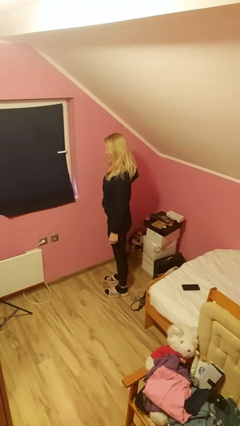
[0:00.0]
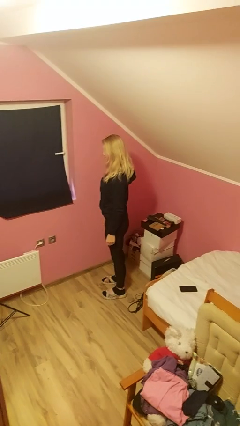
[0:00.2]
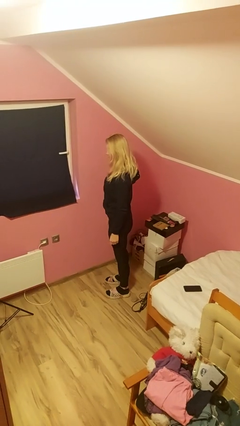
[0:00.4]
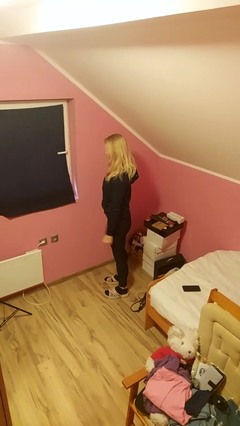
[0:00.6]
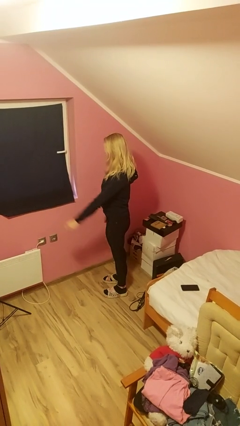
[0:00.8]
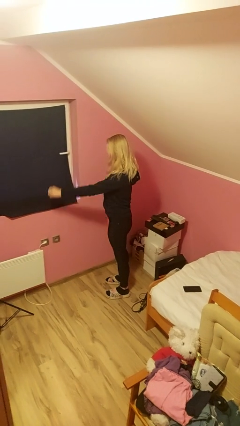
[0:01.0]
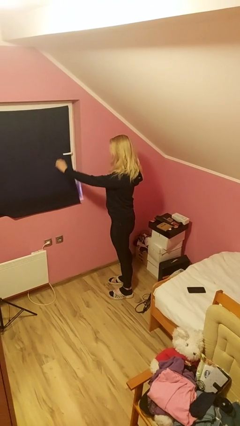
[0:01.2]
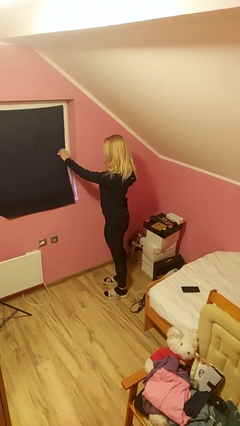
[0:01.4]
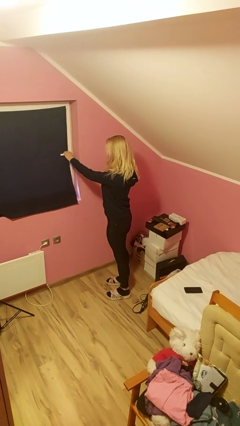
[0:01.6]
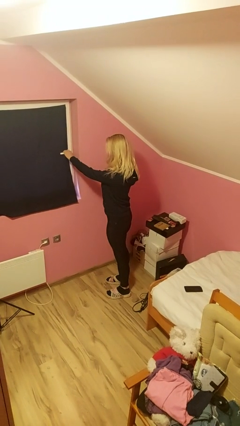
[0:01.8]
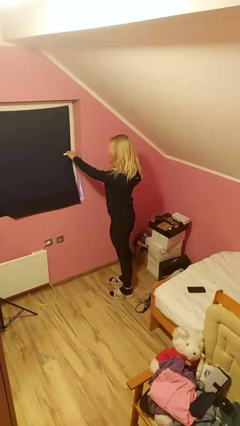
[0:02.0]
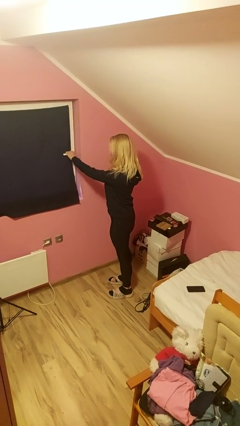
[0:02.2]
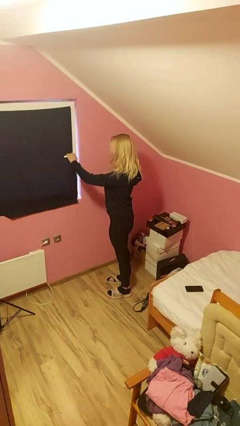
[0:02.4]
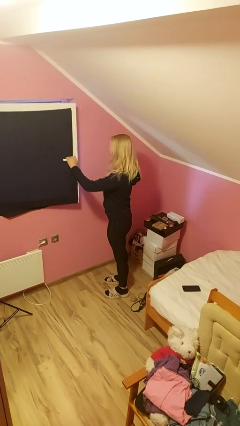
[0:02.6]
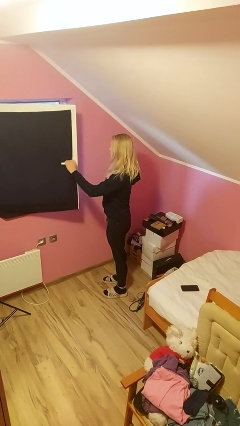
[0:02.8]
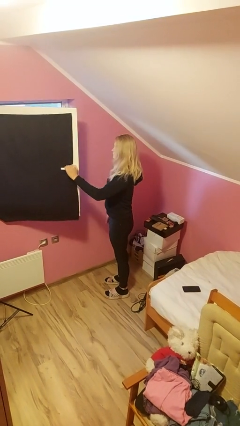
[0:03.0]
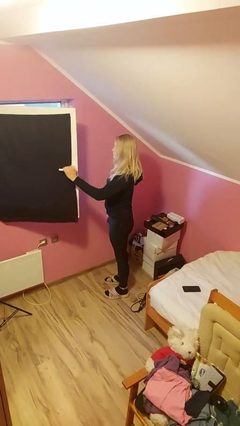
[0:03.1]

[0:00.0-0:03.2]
person opens home window

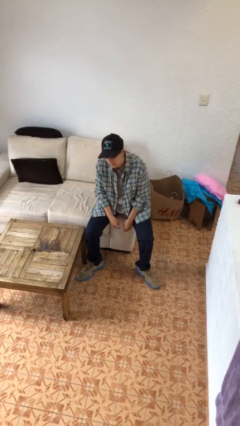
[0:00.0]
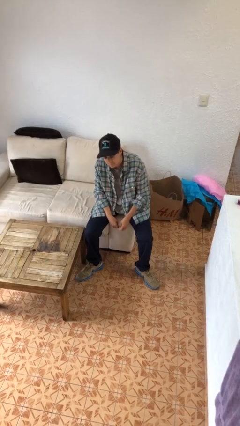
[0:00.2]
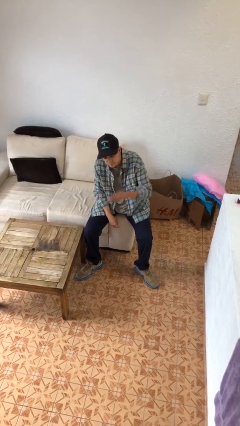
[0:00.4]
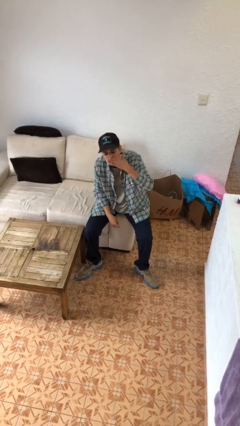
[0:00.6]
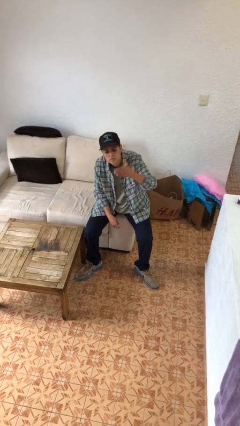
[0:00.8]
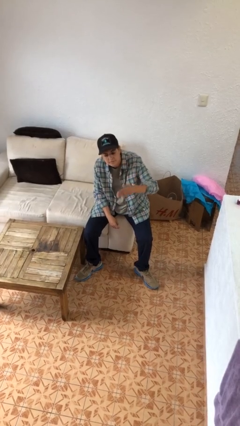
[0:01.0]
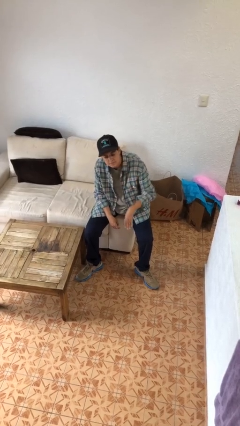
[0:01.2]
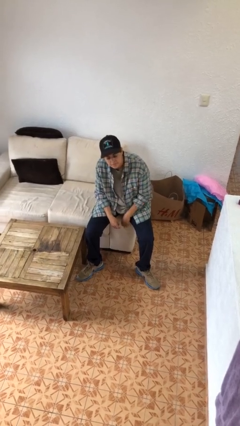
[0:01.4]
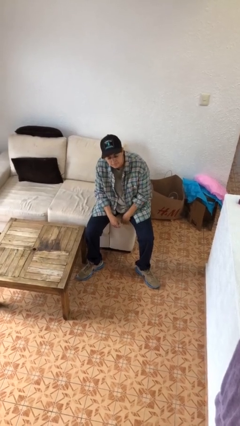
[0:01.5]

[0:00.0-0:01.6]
person gestures blow kiss

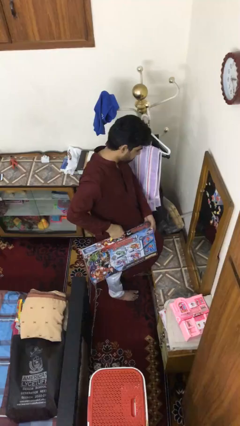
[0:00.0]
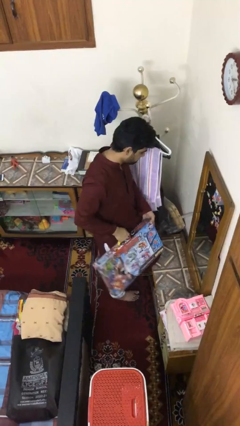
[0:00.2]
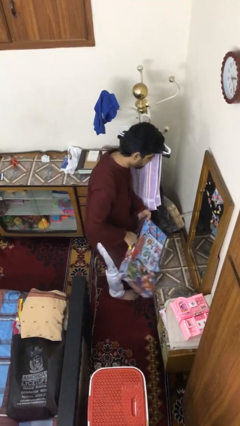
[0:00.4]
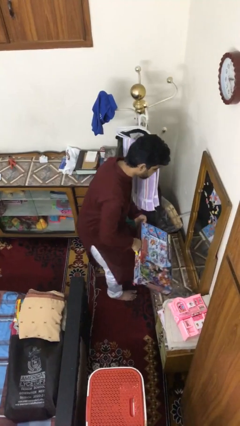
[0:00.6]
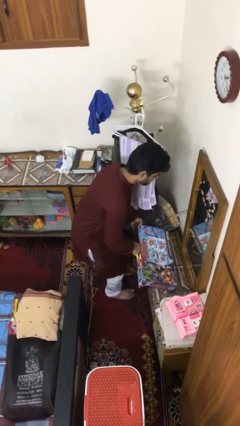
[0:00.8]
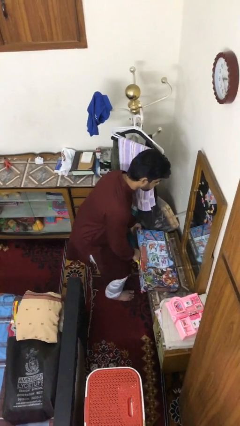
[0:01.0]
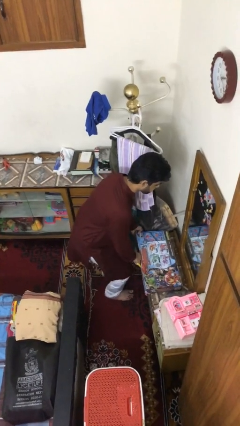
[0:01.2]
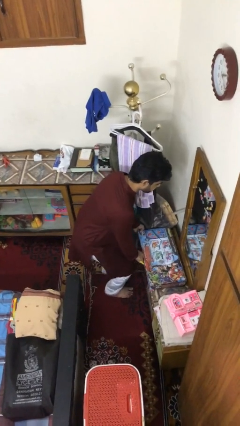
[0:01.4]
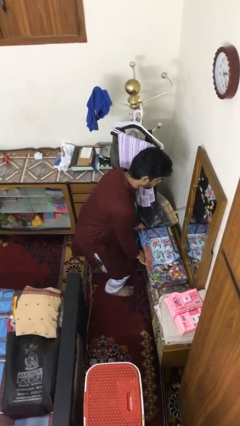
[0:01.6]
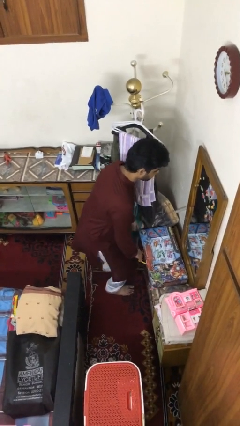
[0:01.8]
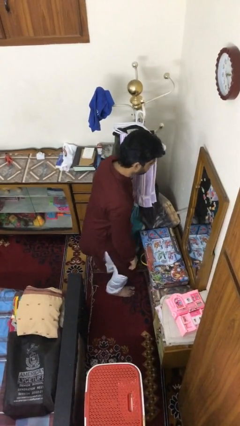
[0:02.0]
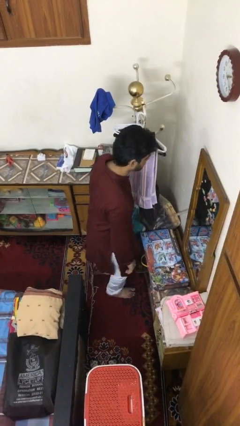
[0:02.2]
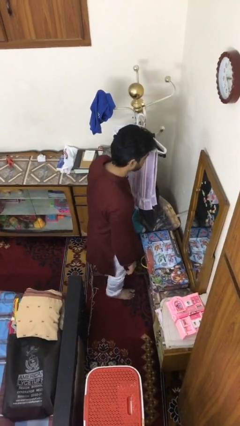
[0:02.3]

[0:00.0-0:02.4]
person puts down object on table

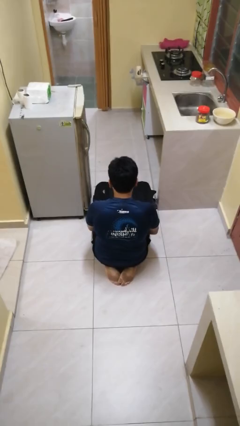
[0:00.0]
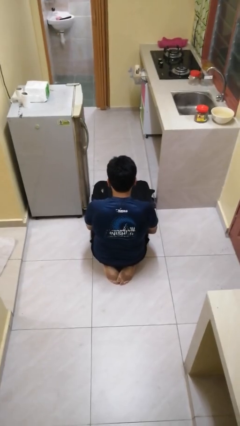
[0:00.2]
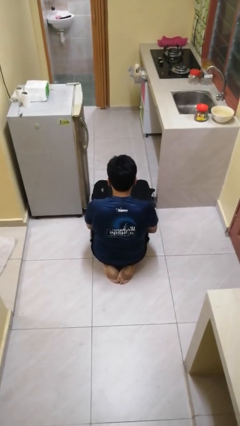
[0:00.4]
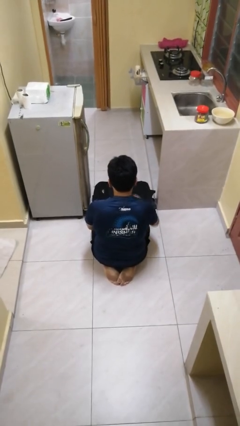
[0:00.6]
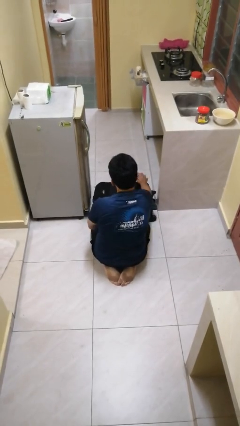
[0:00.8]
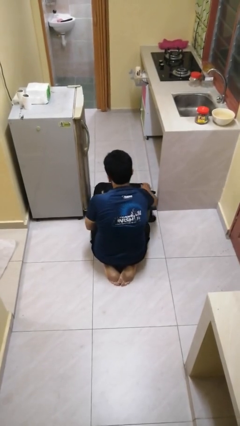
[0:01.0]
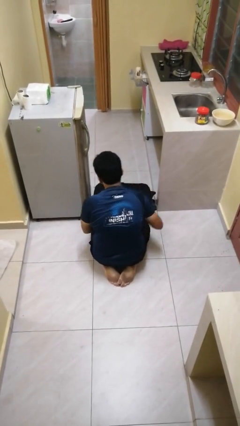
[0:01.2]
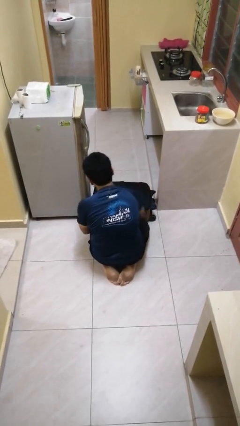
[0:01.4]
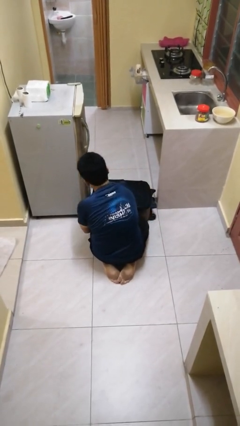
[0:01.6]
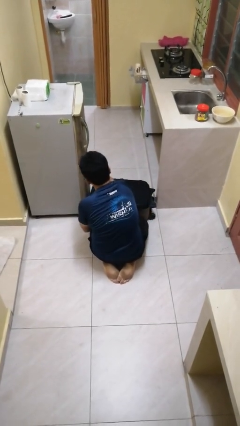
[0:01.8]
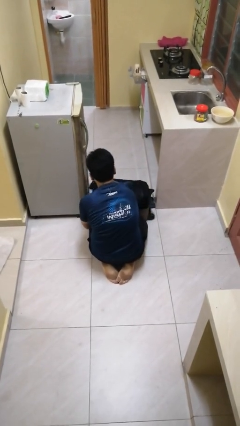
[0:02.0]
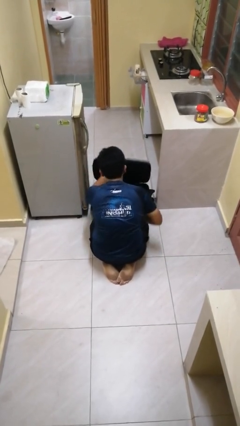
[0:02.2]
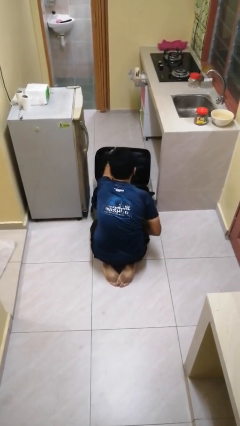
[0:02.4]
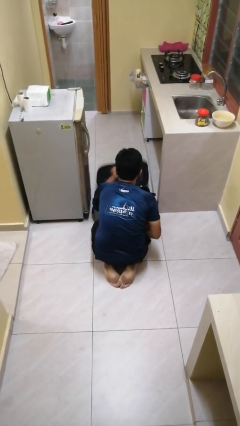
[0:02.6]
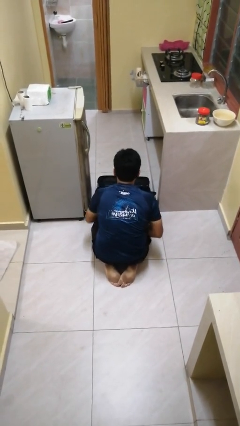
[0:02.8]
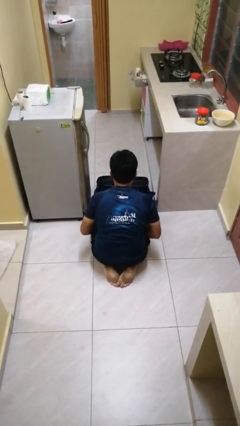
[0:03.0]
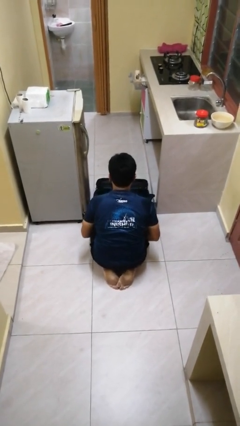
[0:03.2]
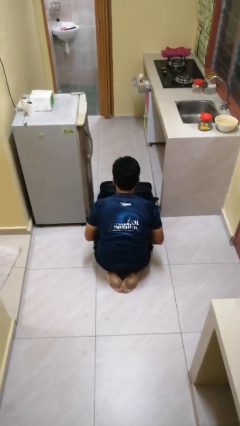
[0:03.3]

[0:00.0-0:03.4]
person opens suitcase

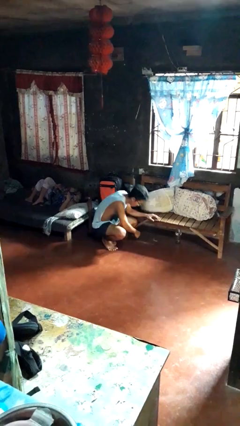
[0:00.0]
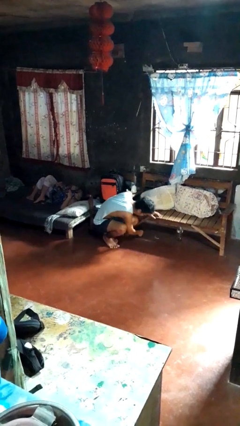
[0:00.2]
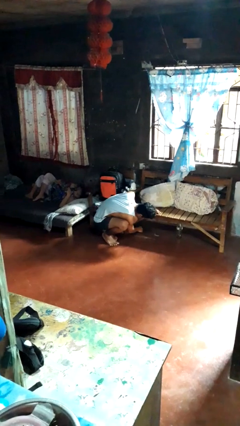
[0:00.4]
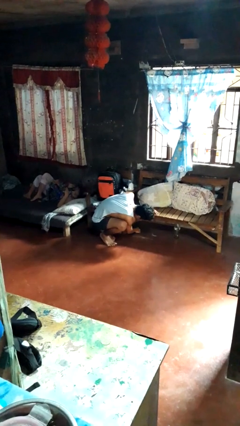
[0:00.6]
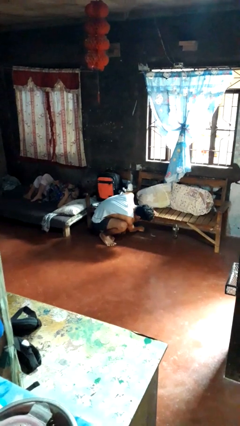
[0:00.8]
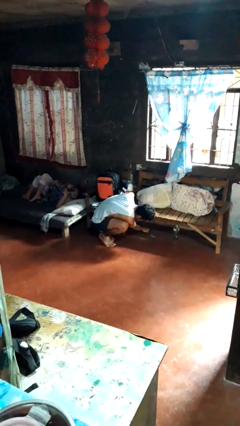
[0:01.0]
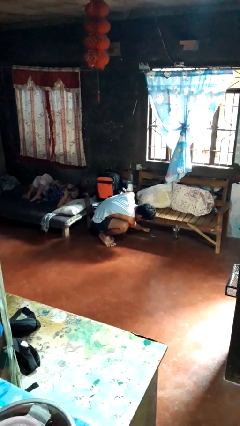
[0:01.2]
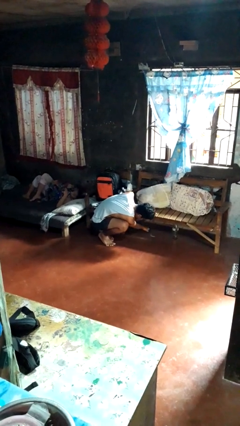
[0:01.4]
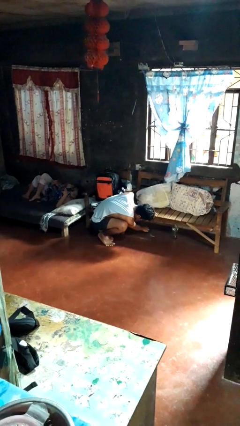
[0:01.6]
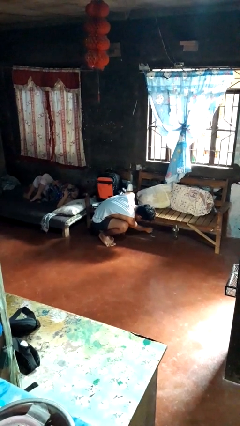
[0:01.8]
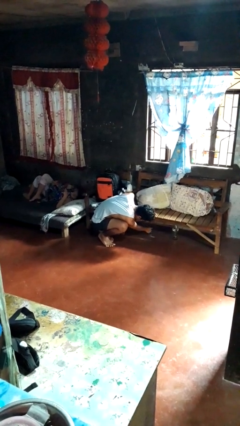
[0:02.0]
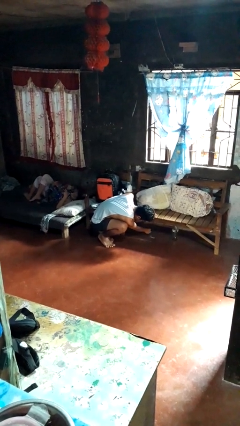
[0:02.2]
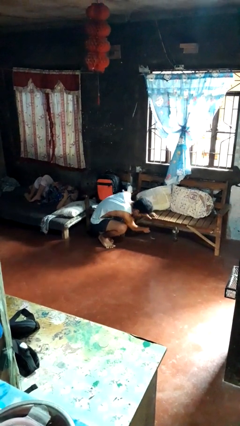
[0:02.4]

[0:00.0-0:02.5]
person searches under couch

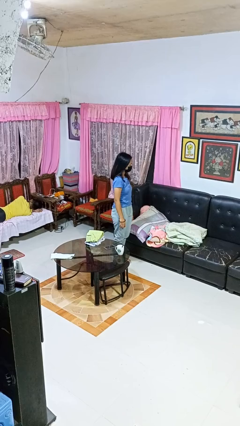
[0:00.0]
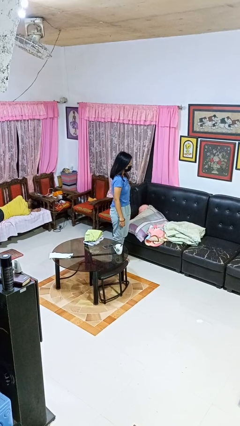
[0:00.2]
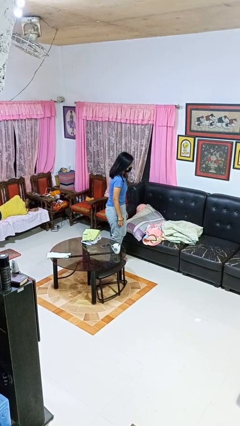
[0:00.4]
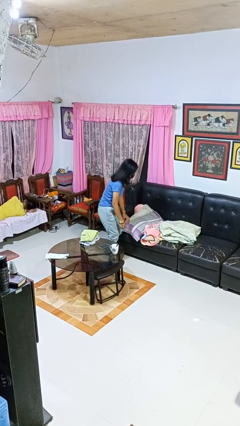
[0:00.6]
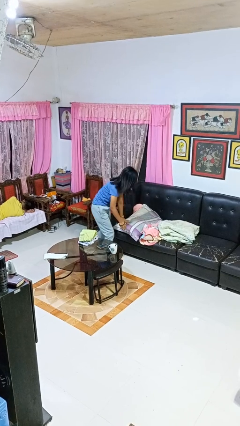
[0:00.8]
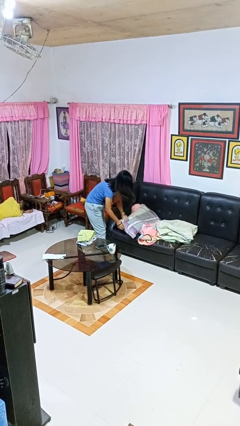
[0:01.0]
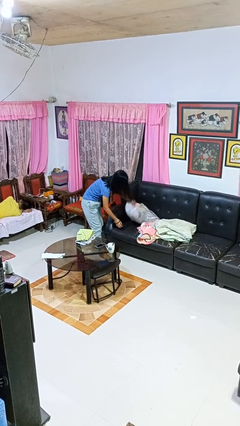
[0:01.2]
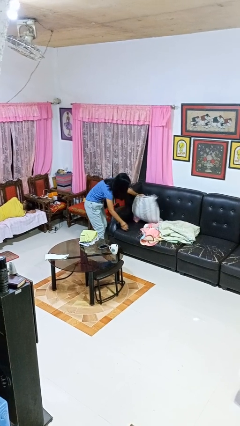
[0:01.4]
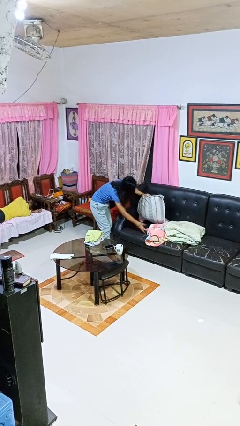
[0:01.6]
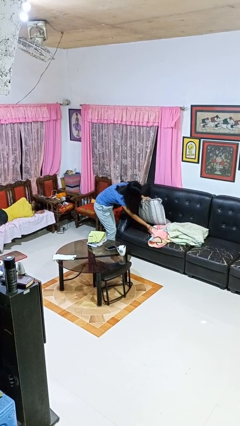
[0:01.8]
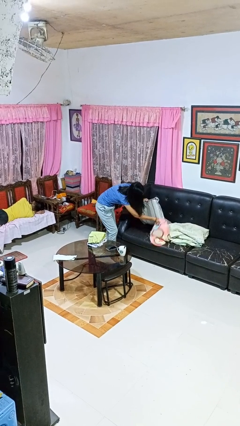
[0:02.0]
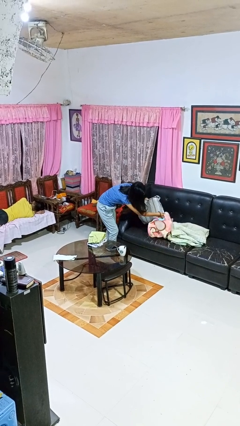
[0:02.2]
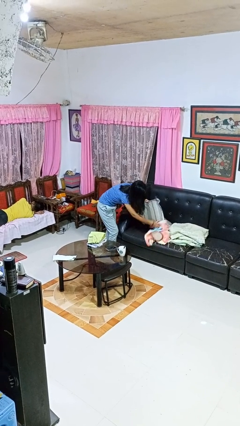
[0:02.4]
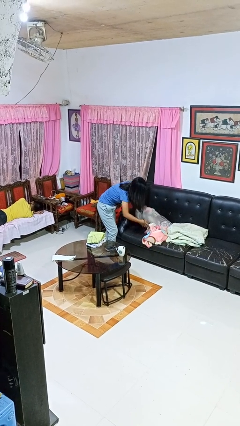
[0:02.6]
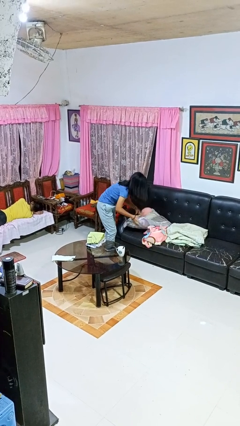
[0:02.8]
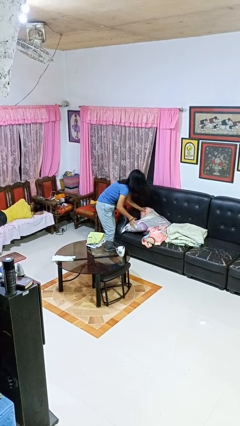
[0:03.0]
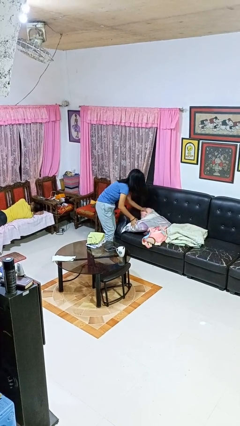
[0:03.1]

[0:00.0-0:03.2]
person searches in couch

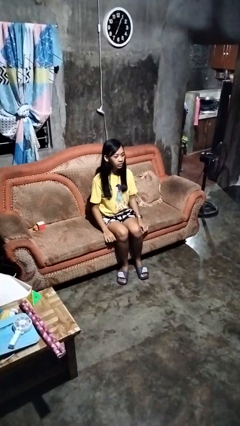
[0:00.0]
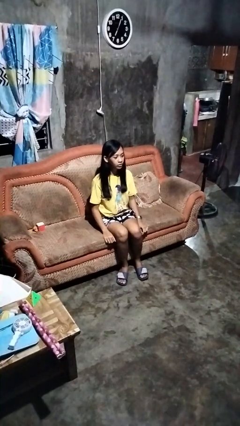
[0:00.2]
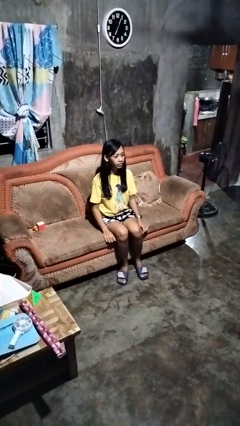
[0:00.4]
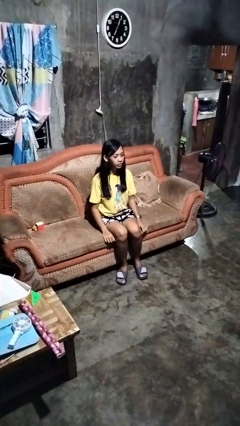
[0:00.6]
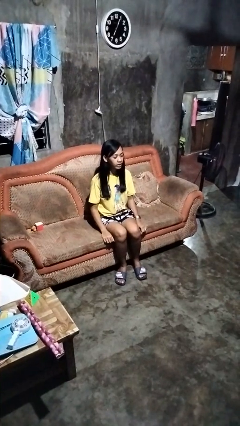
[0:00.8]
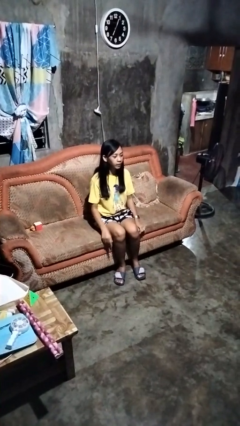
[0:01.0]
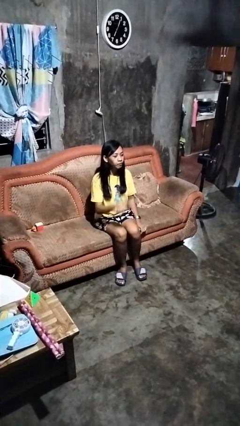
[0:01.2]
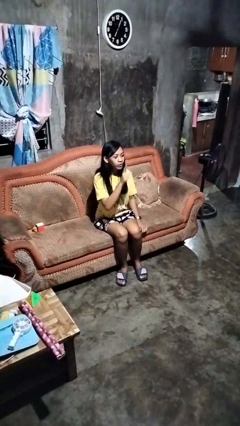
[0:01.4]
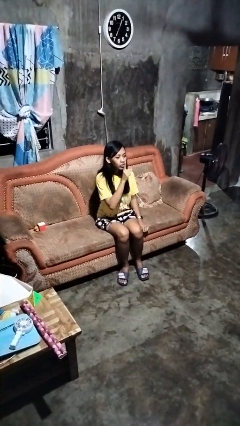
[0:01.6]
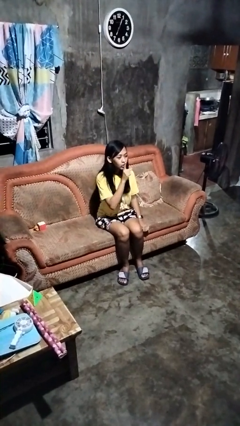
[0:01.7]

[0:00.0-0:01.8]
person gestures be quiet
